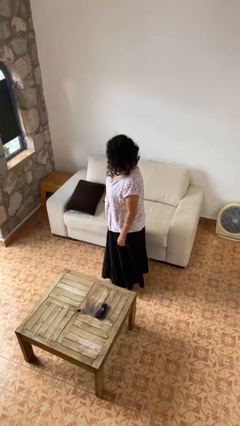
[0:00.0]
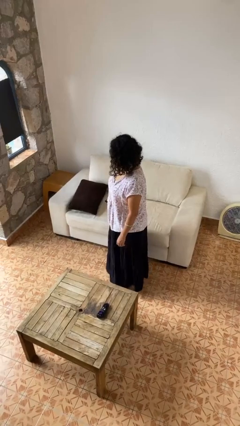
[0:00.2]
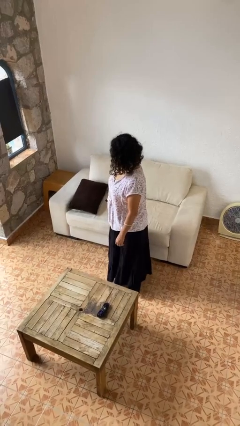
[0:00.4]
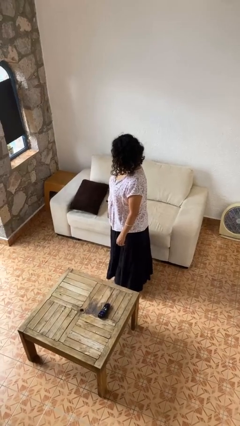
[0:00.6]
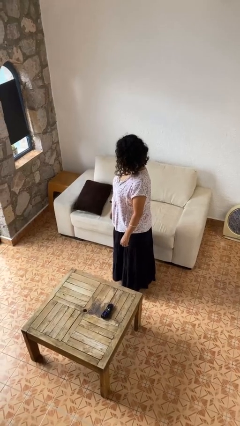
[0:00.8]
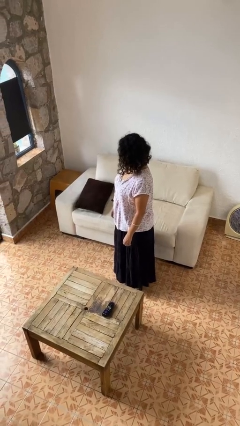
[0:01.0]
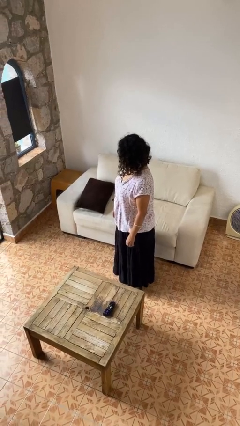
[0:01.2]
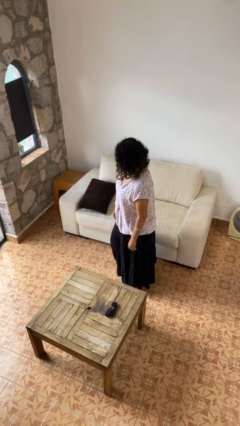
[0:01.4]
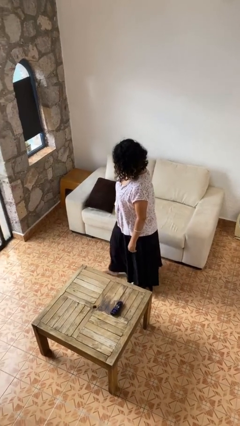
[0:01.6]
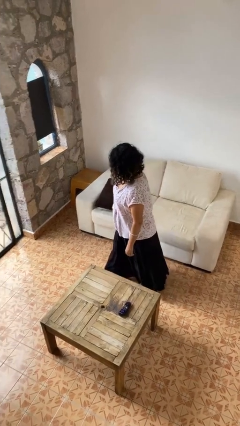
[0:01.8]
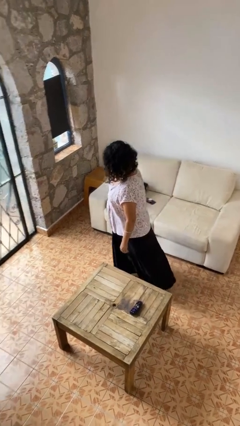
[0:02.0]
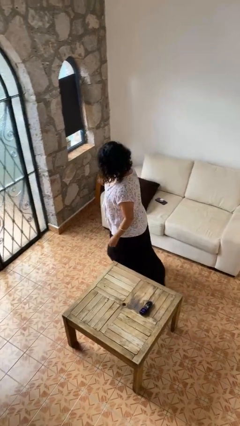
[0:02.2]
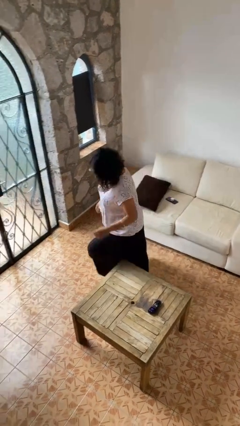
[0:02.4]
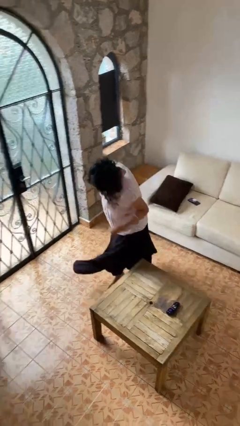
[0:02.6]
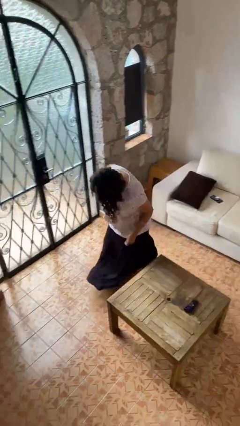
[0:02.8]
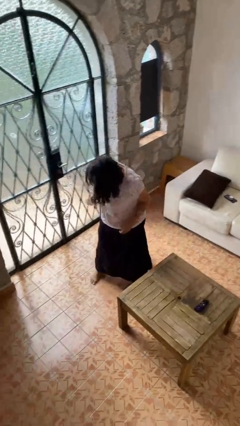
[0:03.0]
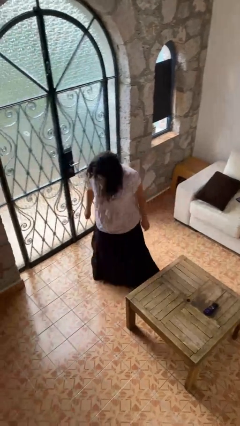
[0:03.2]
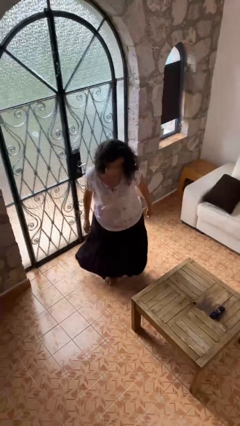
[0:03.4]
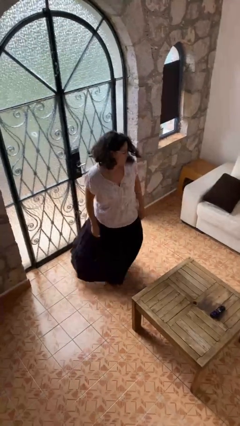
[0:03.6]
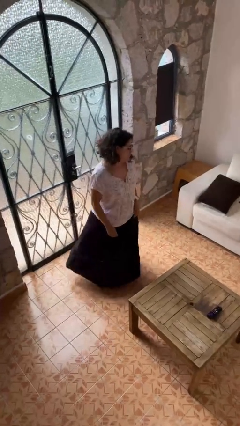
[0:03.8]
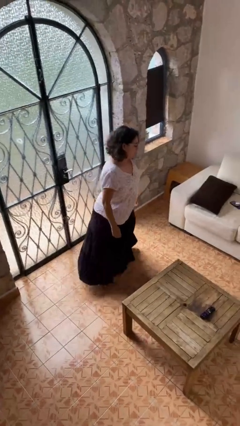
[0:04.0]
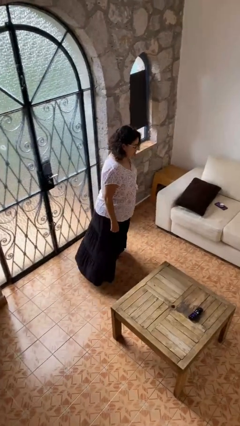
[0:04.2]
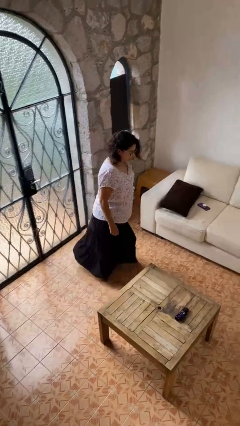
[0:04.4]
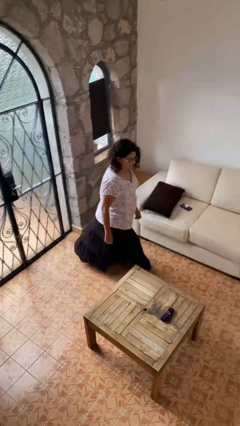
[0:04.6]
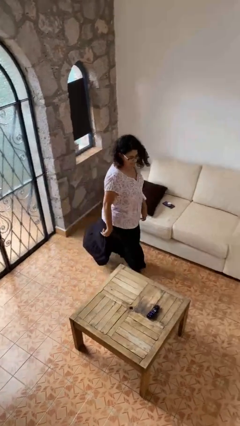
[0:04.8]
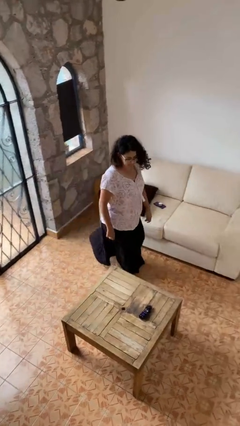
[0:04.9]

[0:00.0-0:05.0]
person bumps into table

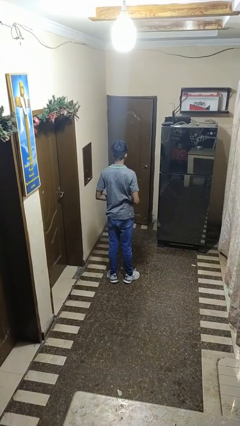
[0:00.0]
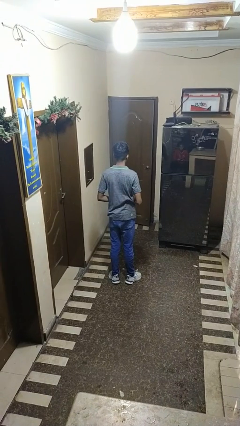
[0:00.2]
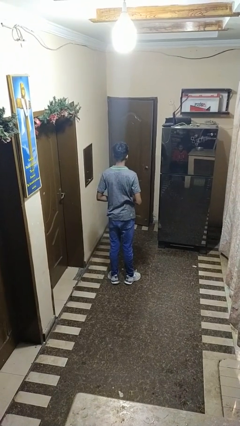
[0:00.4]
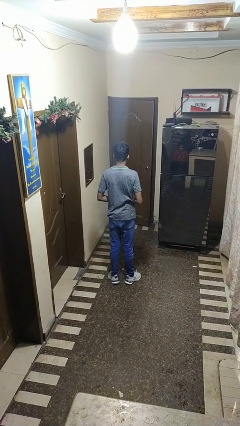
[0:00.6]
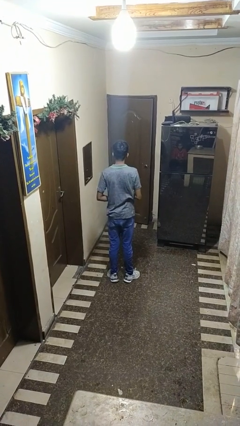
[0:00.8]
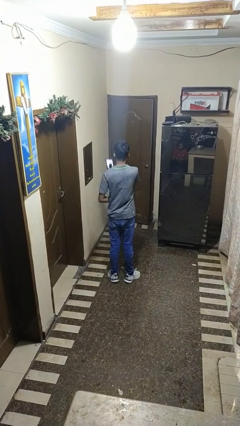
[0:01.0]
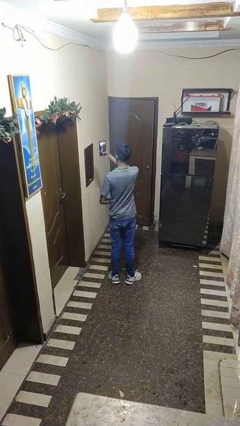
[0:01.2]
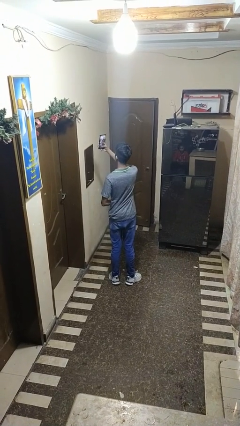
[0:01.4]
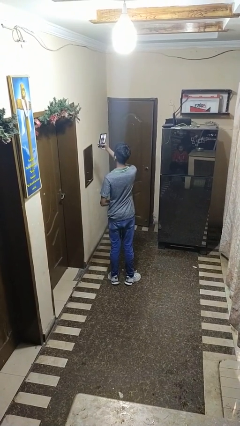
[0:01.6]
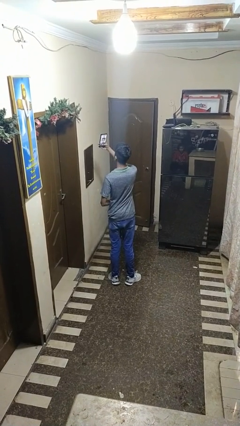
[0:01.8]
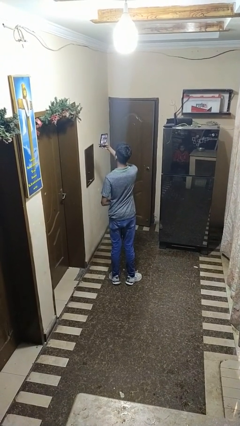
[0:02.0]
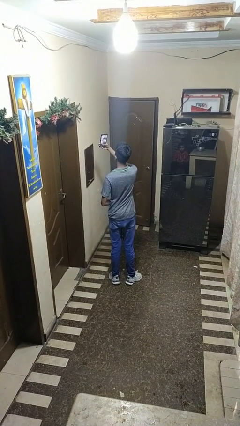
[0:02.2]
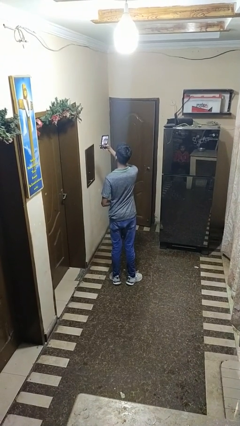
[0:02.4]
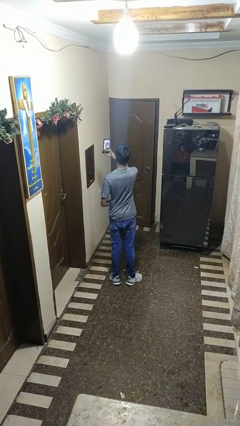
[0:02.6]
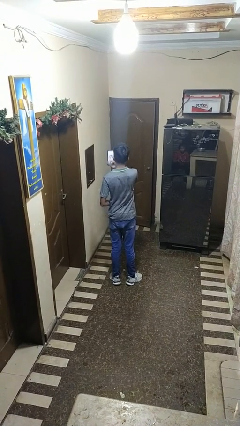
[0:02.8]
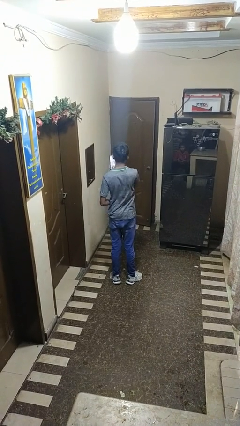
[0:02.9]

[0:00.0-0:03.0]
person takes selfie

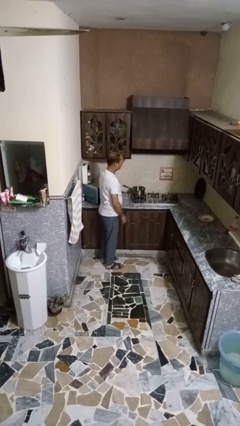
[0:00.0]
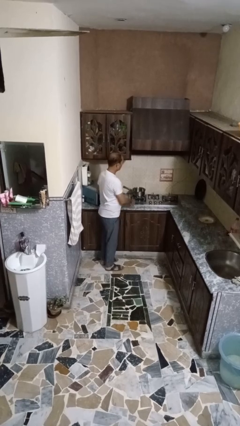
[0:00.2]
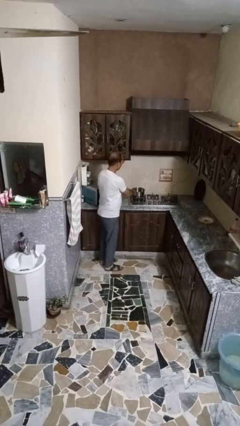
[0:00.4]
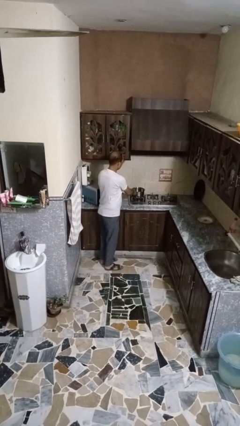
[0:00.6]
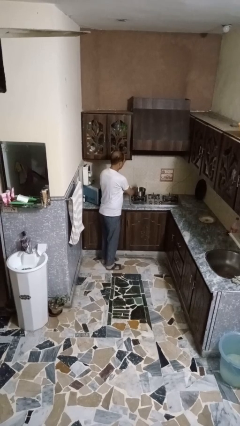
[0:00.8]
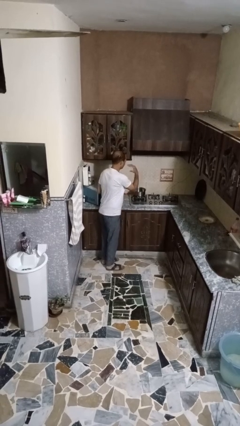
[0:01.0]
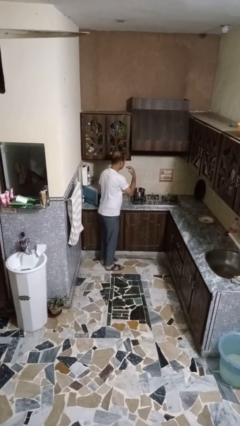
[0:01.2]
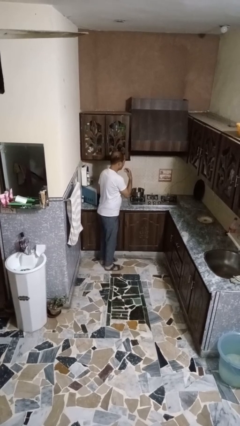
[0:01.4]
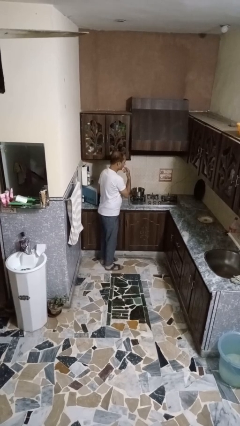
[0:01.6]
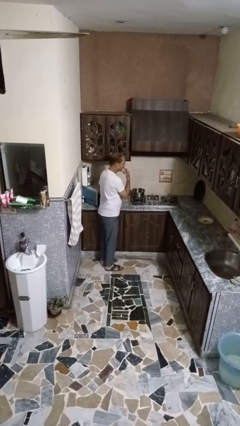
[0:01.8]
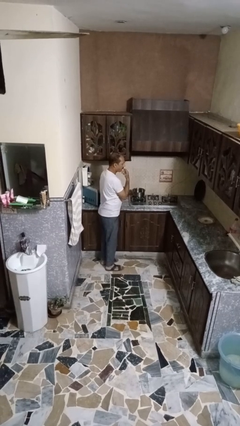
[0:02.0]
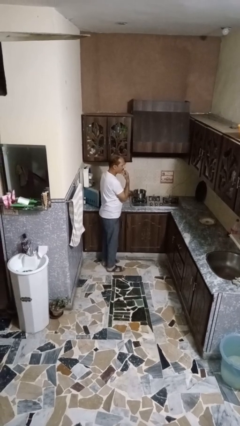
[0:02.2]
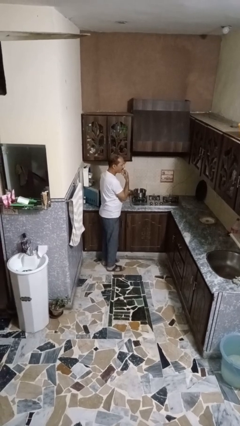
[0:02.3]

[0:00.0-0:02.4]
person burns hand

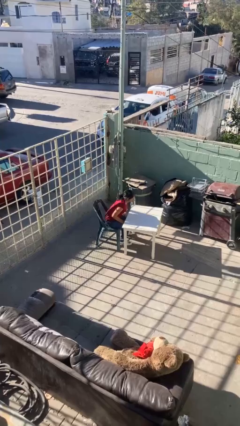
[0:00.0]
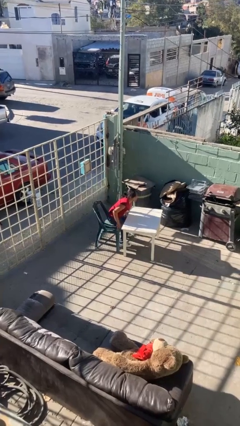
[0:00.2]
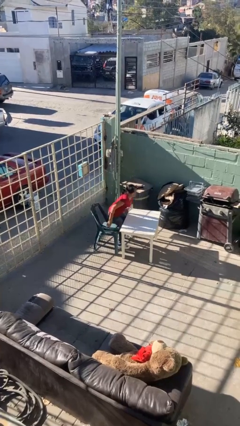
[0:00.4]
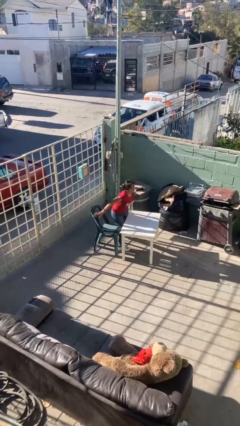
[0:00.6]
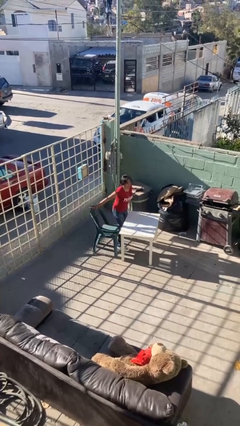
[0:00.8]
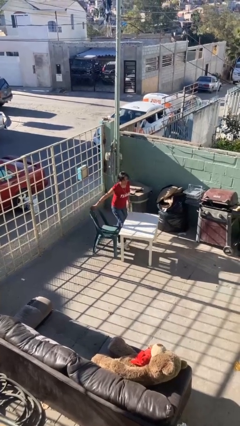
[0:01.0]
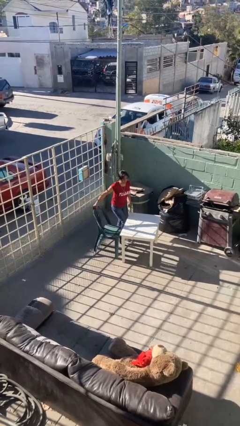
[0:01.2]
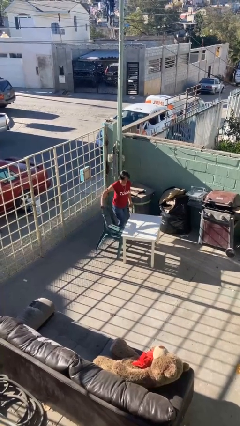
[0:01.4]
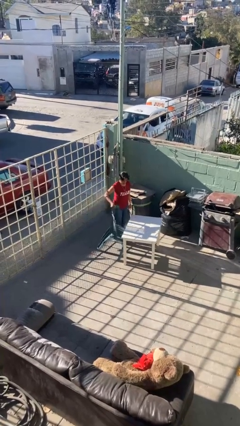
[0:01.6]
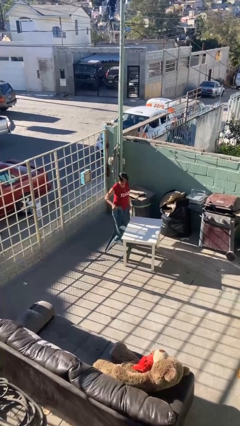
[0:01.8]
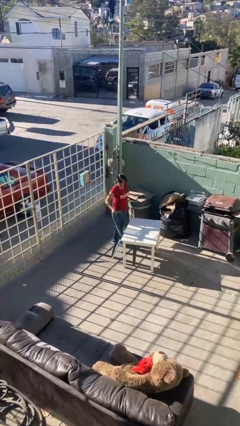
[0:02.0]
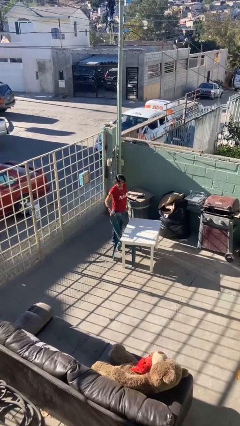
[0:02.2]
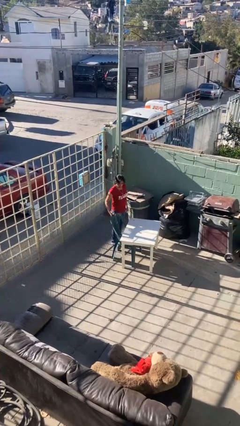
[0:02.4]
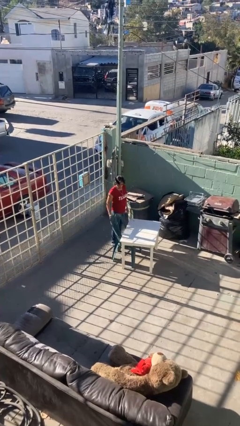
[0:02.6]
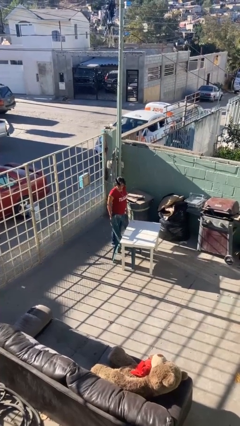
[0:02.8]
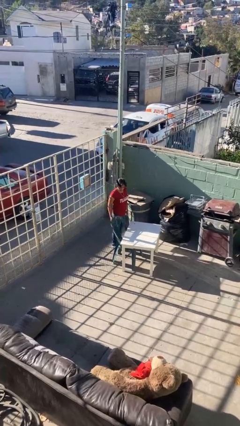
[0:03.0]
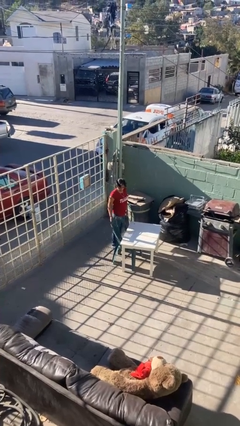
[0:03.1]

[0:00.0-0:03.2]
person stands up

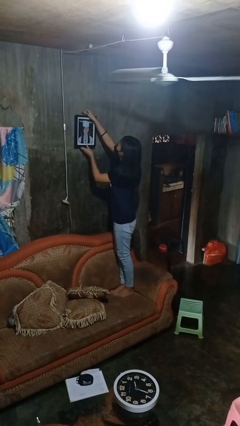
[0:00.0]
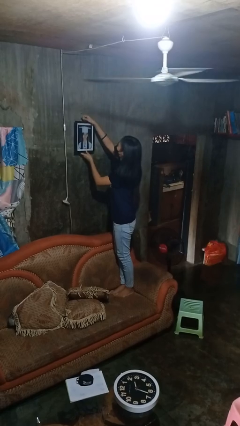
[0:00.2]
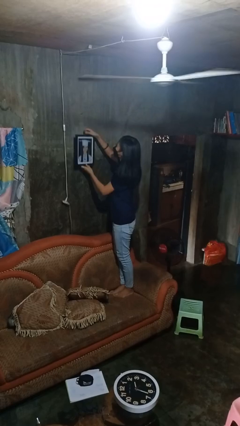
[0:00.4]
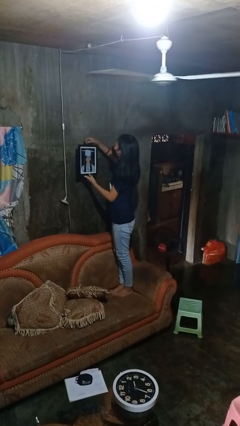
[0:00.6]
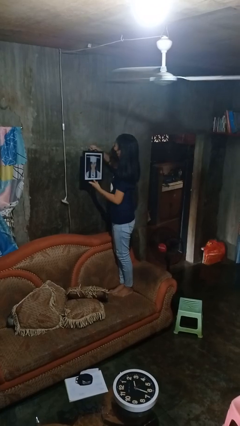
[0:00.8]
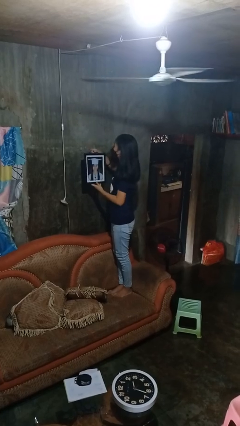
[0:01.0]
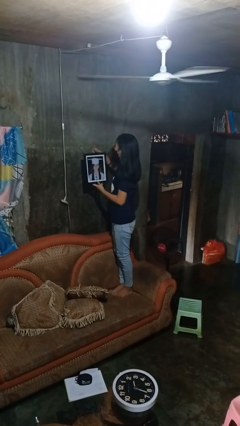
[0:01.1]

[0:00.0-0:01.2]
person takes down picture frame

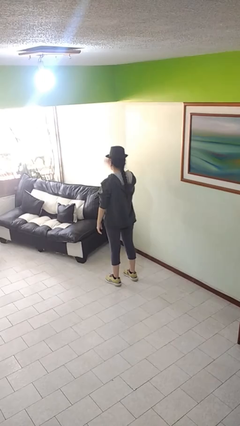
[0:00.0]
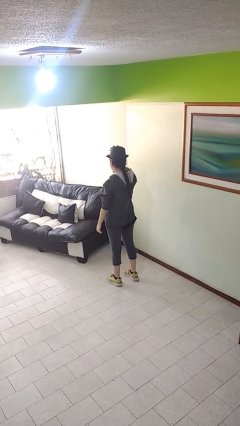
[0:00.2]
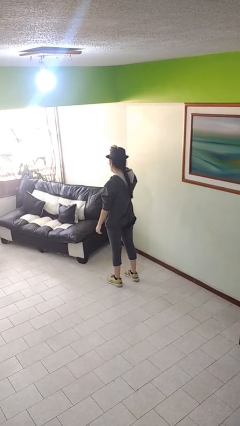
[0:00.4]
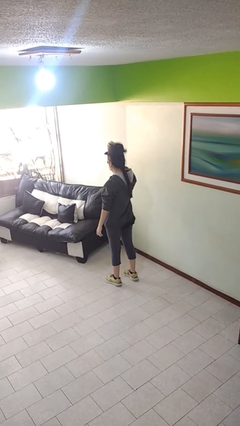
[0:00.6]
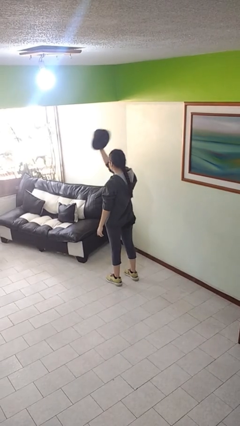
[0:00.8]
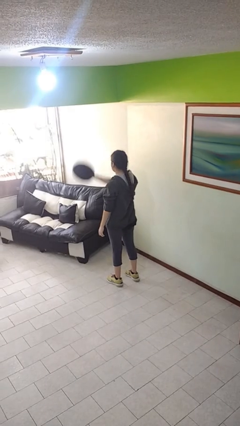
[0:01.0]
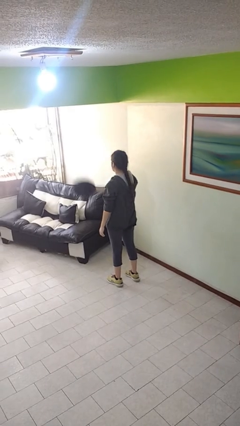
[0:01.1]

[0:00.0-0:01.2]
person takes off hat

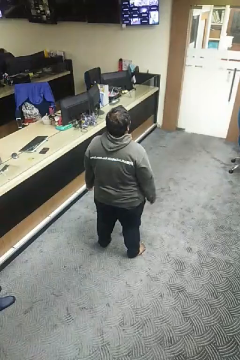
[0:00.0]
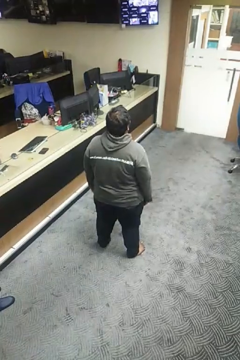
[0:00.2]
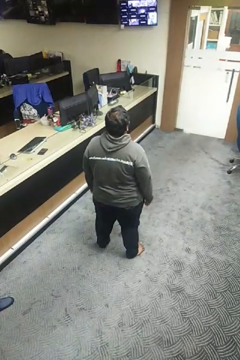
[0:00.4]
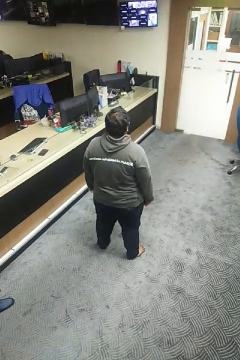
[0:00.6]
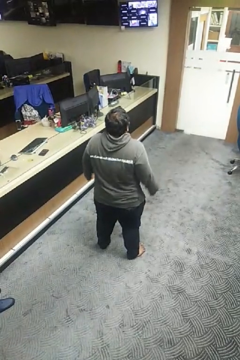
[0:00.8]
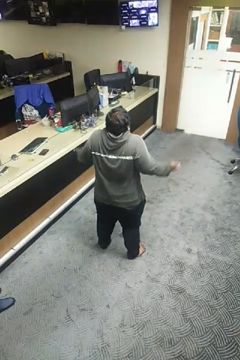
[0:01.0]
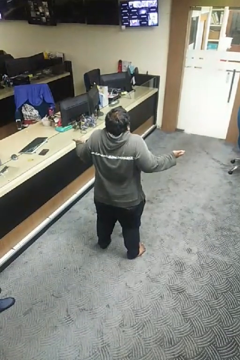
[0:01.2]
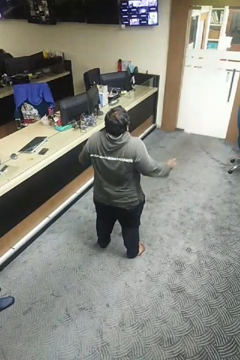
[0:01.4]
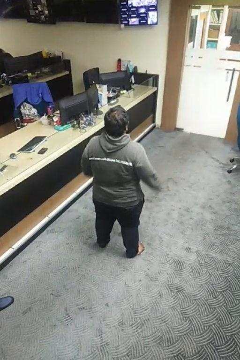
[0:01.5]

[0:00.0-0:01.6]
person shrugs

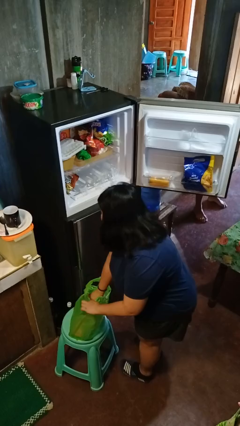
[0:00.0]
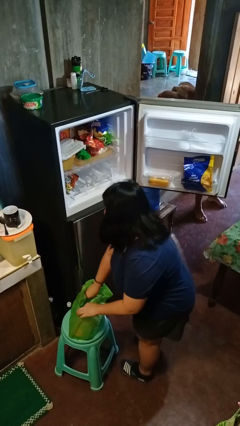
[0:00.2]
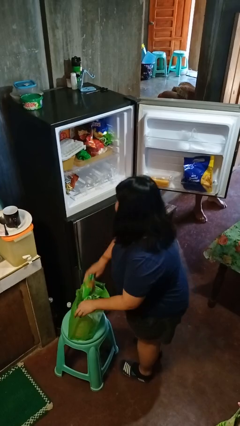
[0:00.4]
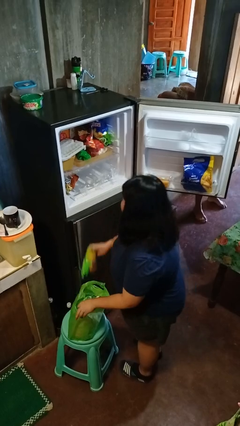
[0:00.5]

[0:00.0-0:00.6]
person loads groceries into refrigerator
